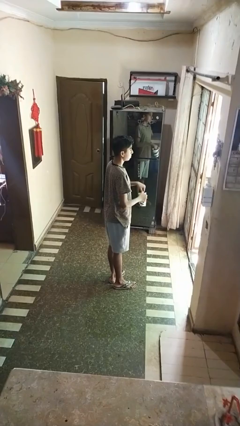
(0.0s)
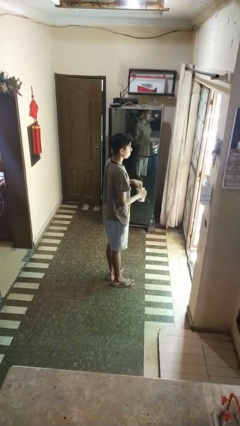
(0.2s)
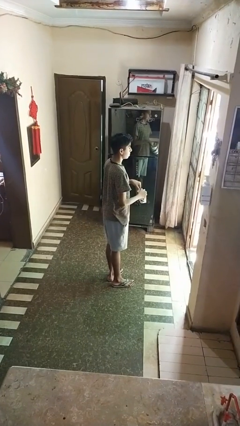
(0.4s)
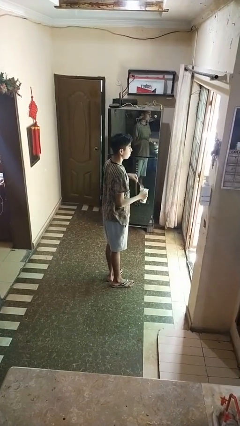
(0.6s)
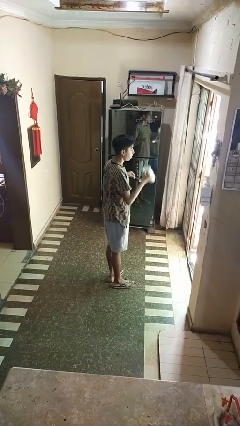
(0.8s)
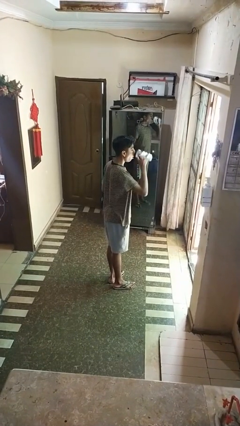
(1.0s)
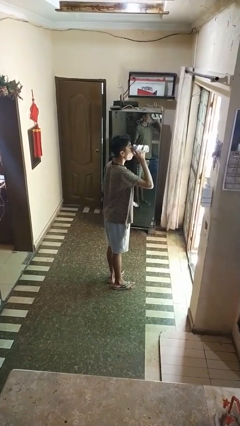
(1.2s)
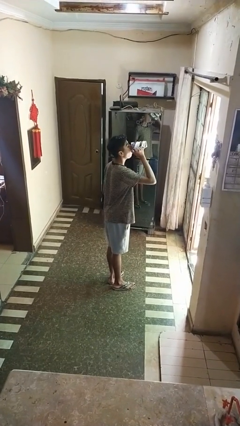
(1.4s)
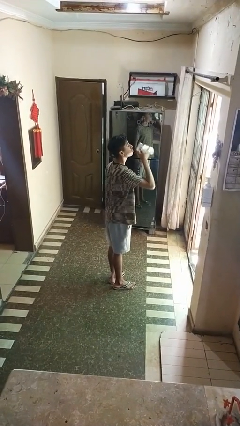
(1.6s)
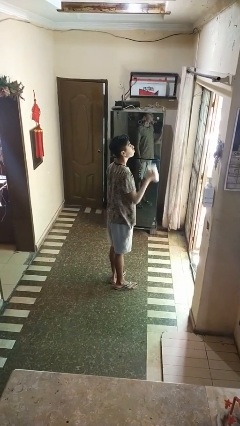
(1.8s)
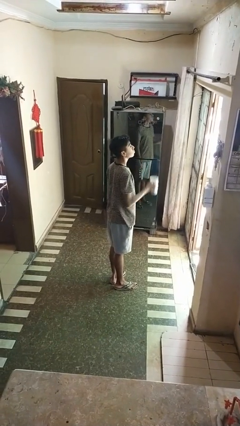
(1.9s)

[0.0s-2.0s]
person drinks from mug

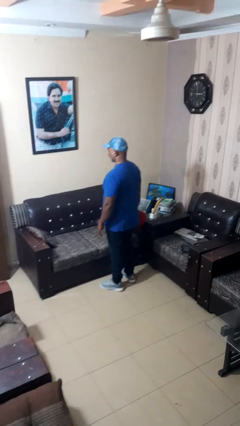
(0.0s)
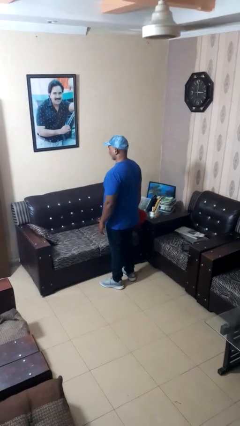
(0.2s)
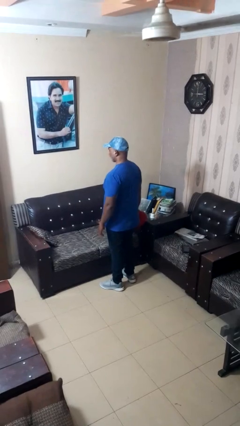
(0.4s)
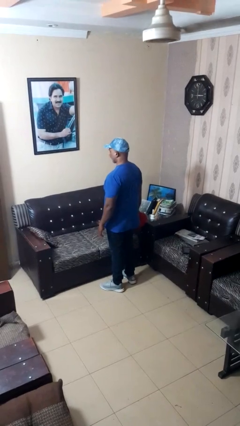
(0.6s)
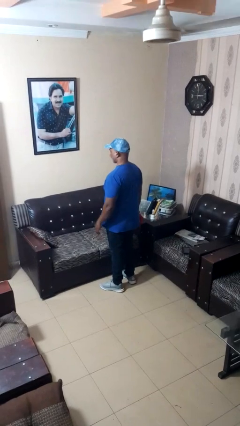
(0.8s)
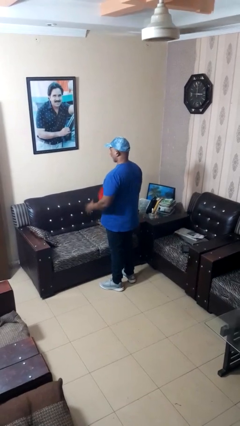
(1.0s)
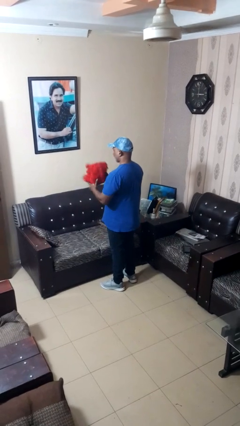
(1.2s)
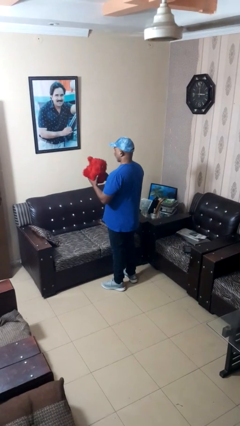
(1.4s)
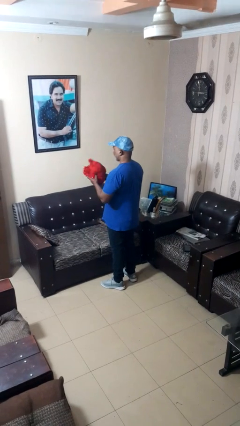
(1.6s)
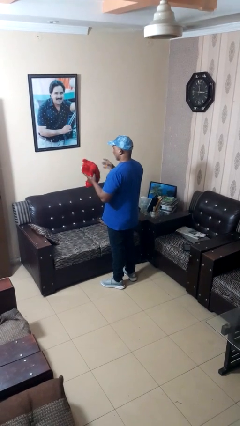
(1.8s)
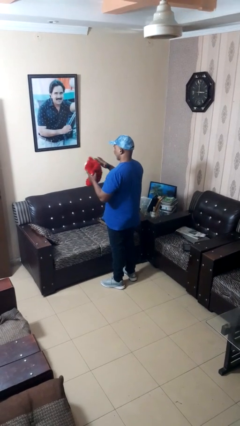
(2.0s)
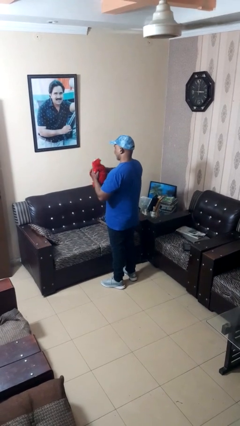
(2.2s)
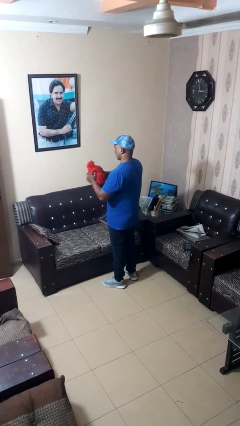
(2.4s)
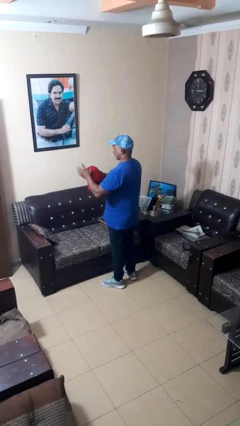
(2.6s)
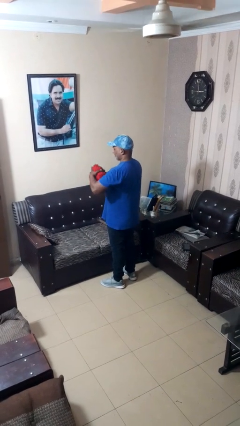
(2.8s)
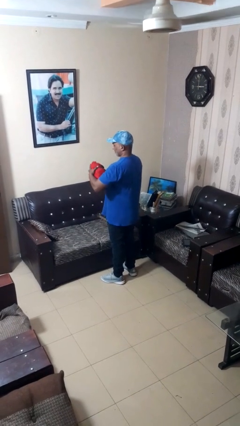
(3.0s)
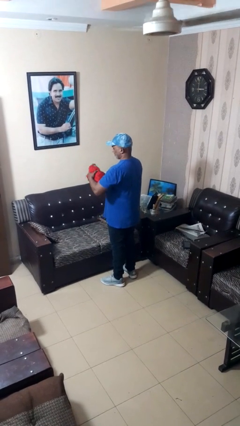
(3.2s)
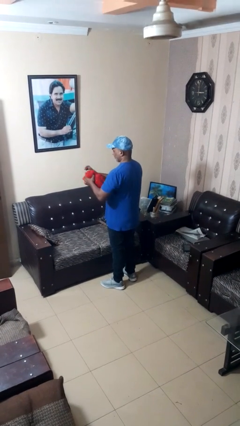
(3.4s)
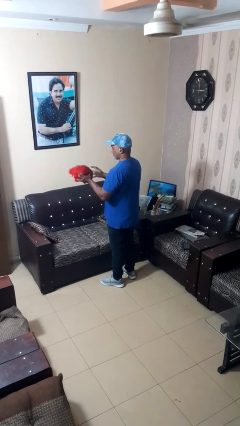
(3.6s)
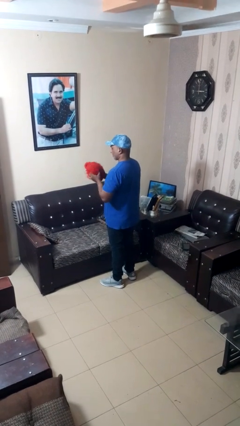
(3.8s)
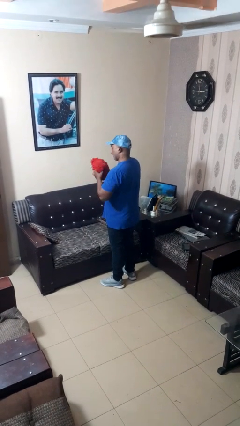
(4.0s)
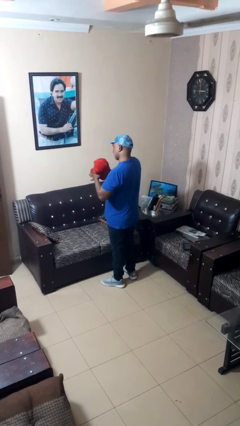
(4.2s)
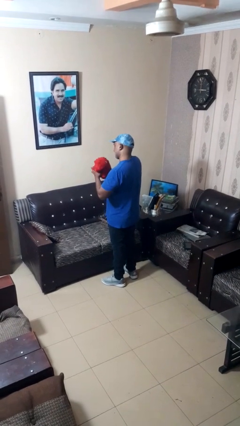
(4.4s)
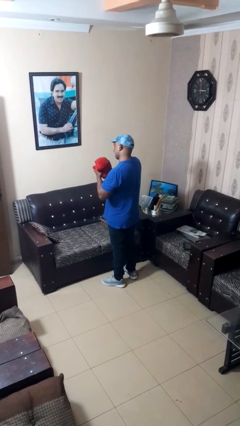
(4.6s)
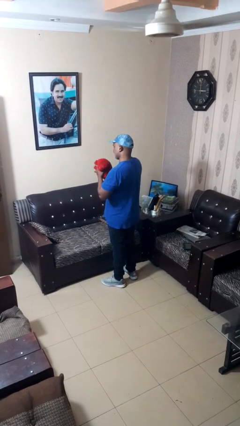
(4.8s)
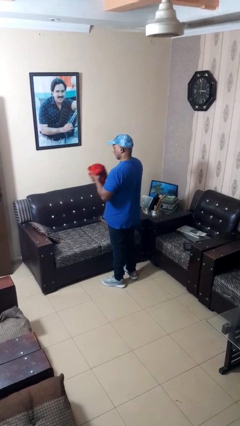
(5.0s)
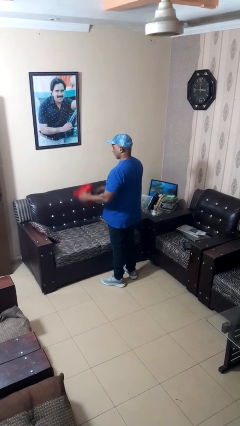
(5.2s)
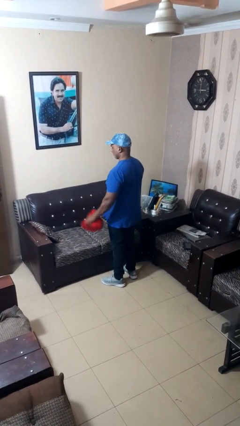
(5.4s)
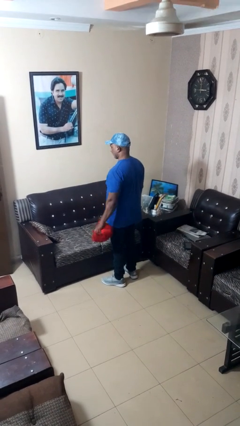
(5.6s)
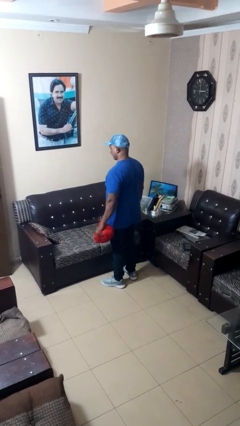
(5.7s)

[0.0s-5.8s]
person squeezes object

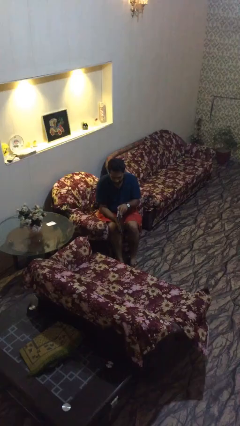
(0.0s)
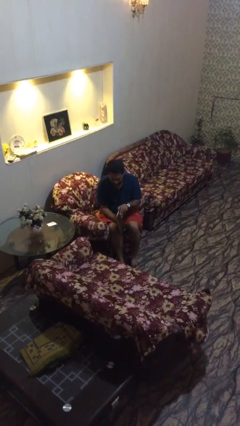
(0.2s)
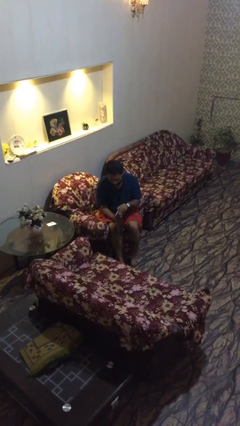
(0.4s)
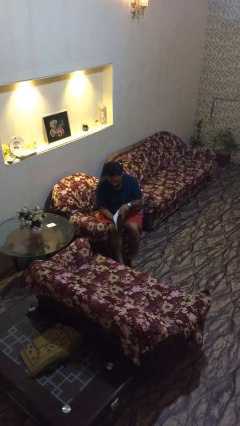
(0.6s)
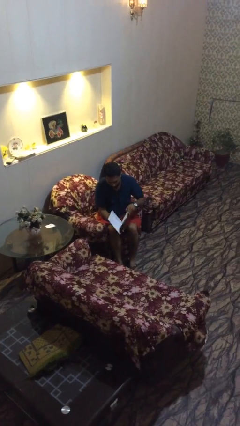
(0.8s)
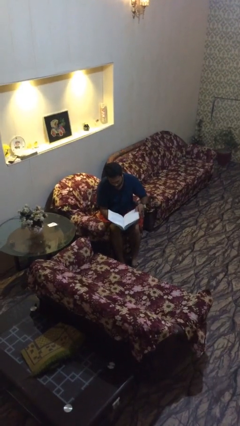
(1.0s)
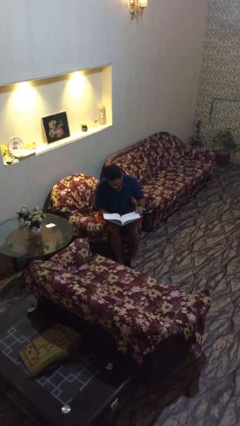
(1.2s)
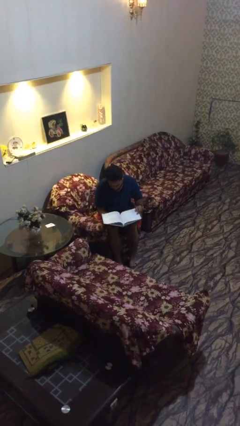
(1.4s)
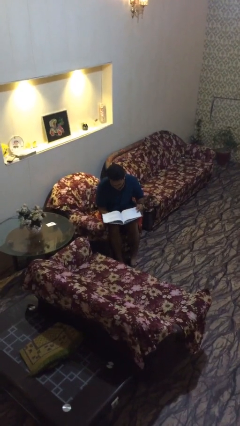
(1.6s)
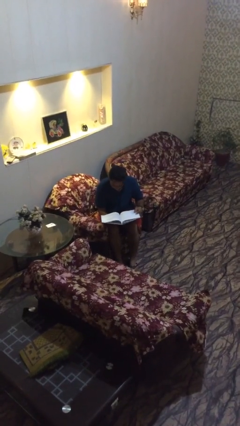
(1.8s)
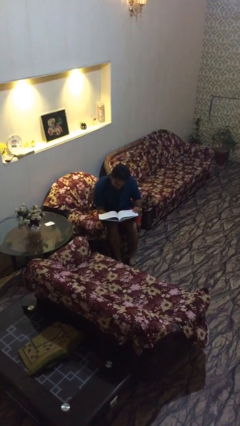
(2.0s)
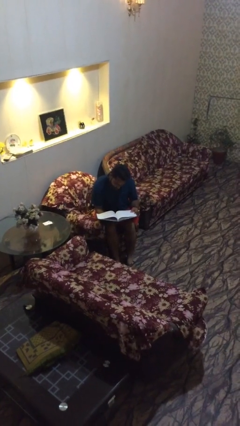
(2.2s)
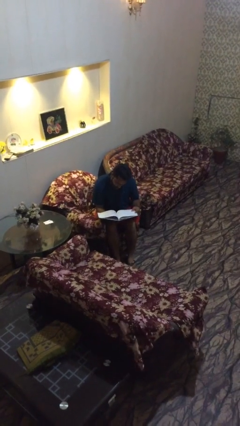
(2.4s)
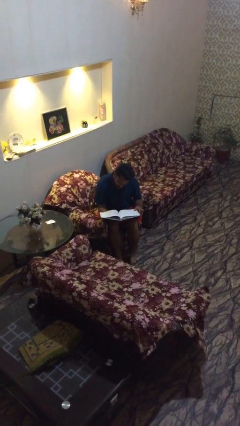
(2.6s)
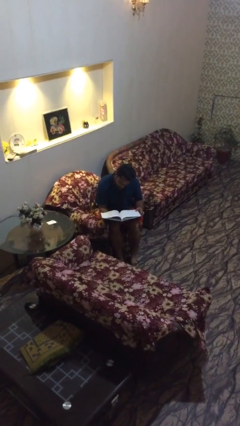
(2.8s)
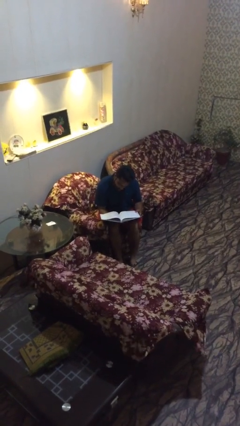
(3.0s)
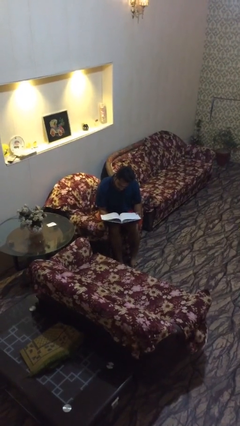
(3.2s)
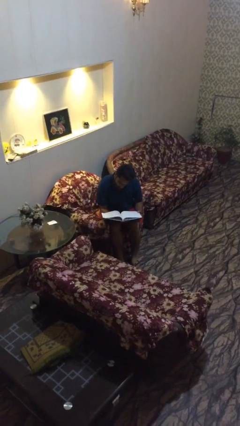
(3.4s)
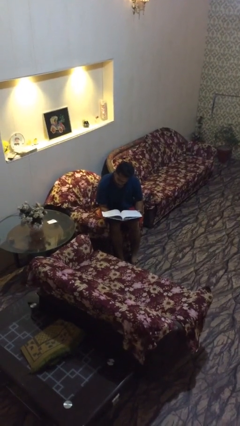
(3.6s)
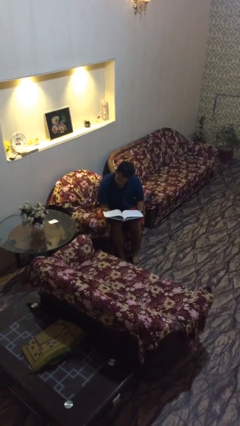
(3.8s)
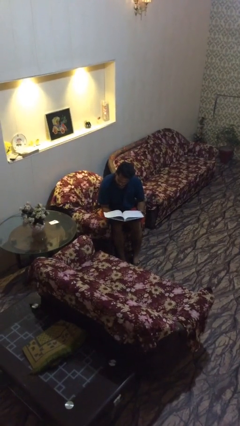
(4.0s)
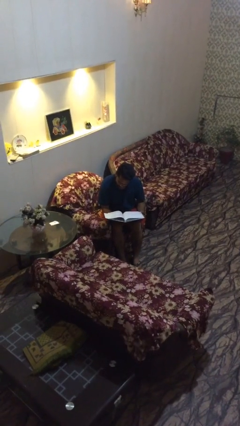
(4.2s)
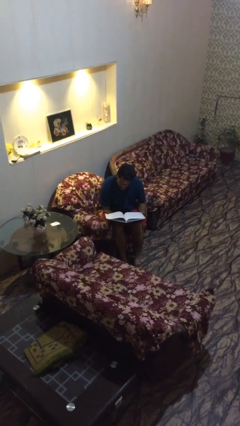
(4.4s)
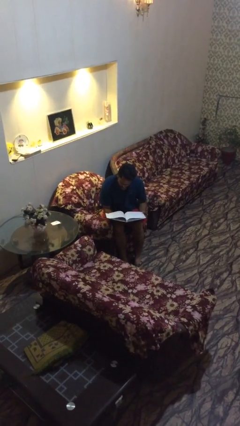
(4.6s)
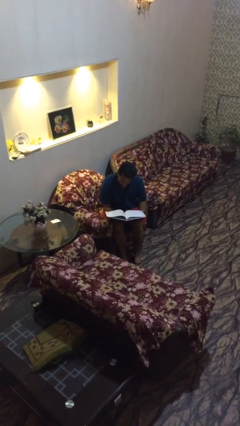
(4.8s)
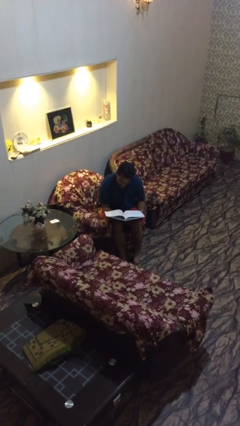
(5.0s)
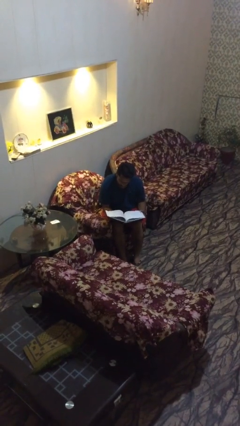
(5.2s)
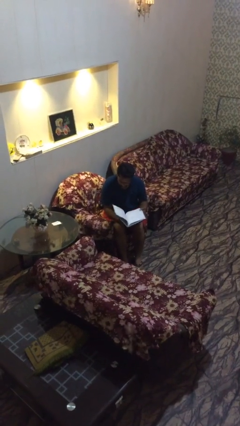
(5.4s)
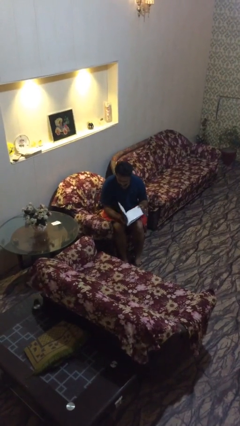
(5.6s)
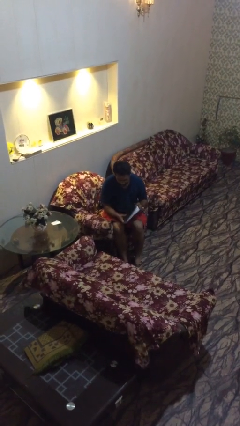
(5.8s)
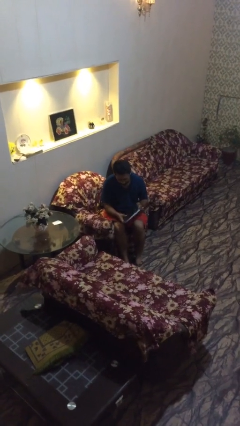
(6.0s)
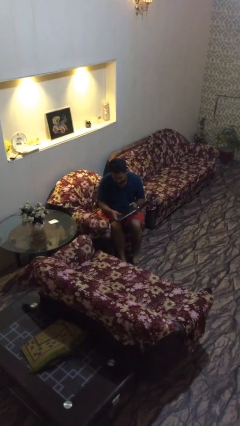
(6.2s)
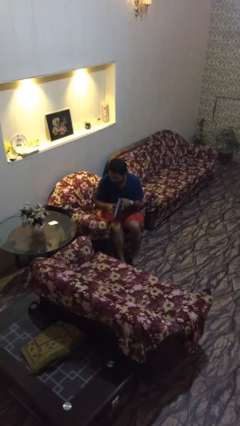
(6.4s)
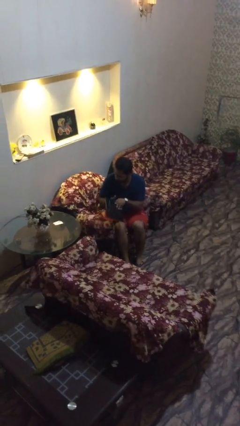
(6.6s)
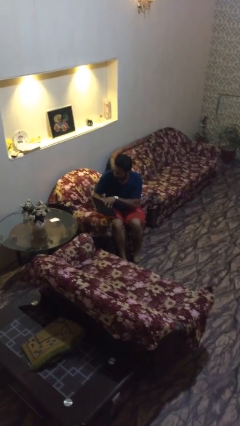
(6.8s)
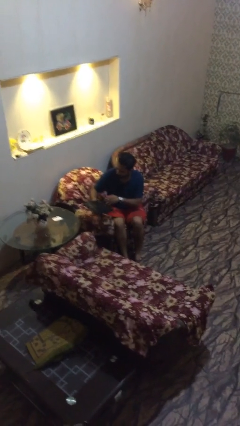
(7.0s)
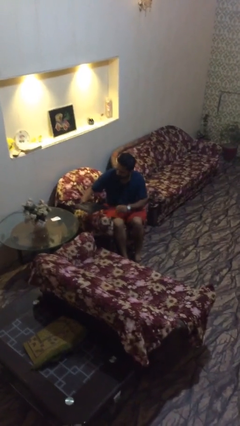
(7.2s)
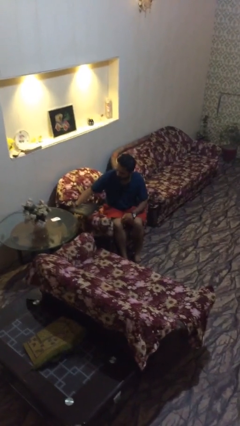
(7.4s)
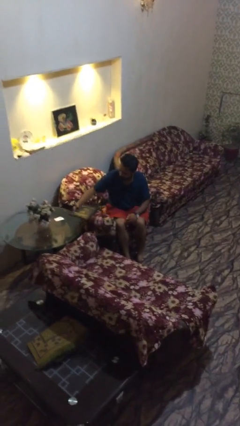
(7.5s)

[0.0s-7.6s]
person reads document

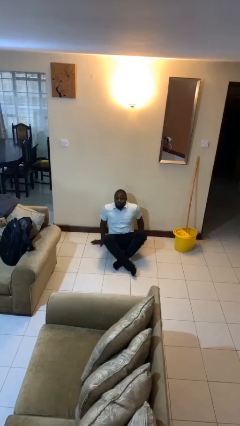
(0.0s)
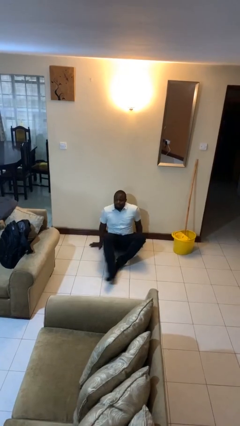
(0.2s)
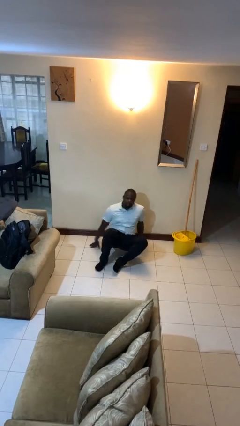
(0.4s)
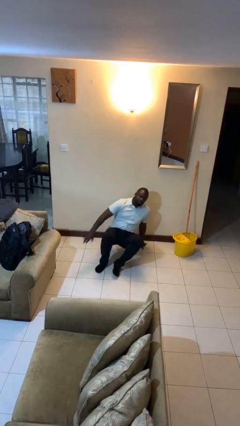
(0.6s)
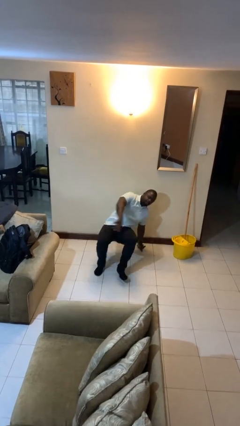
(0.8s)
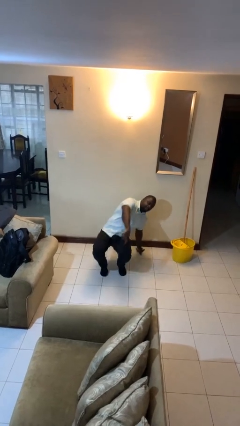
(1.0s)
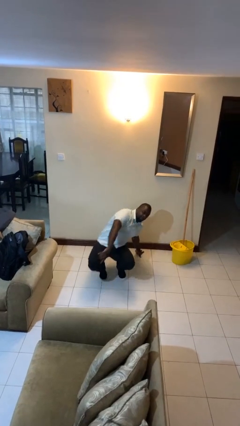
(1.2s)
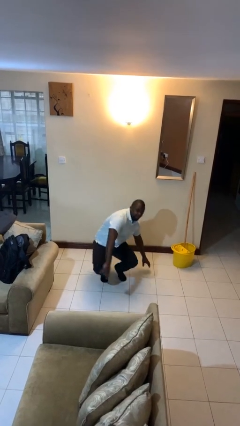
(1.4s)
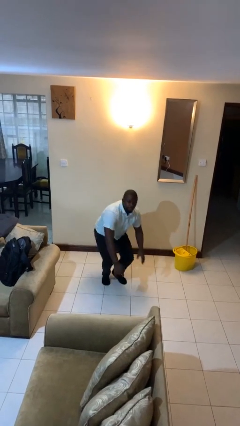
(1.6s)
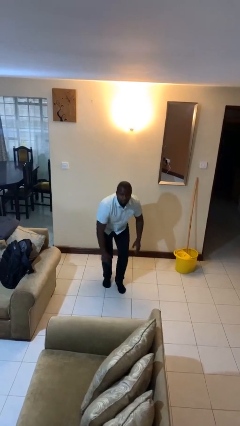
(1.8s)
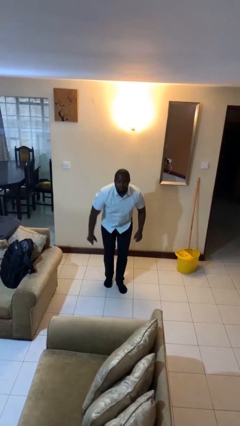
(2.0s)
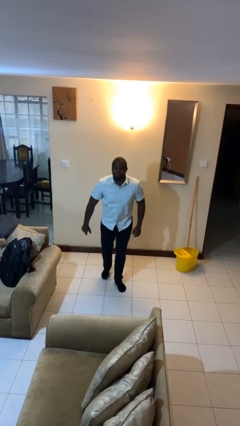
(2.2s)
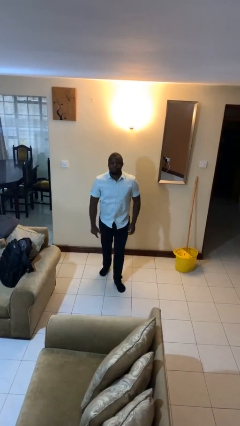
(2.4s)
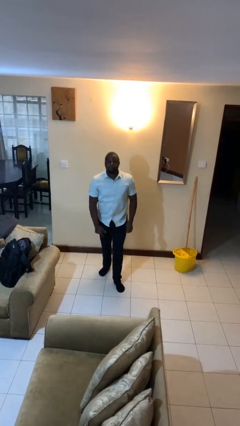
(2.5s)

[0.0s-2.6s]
person stands up from floor
